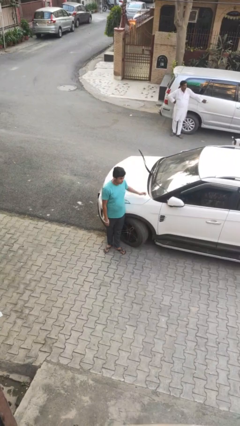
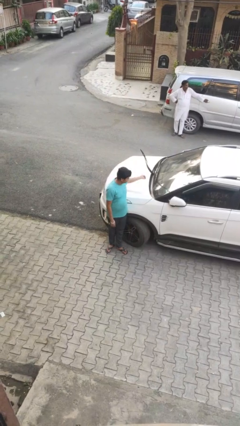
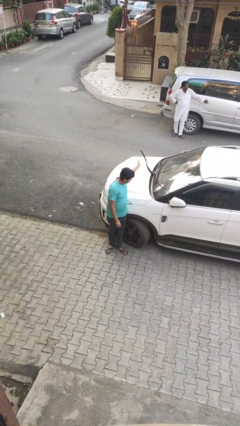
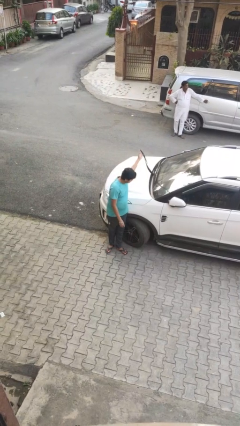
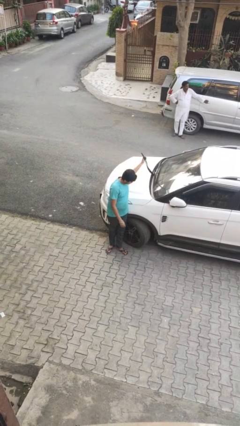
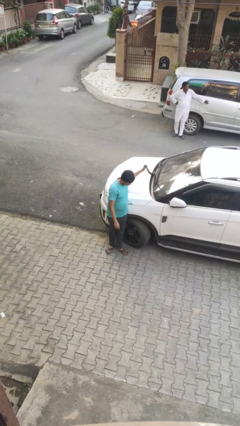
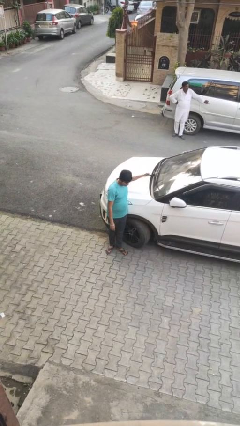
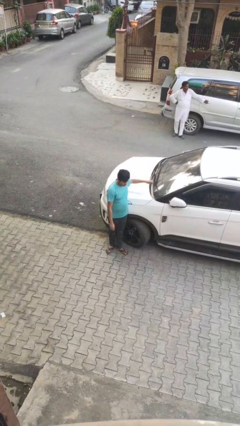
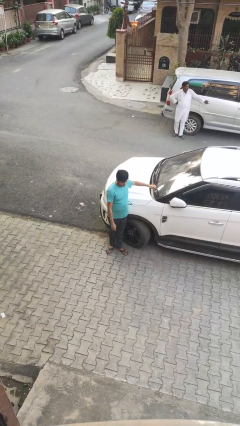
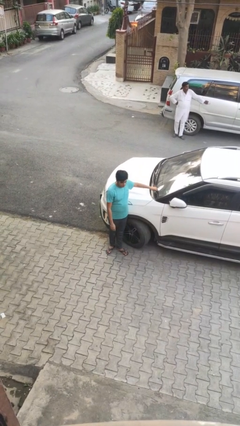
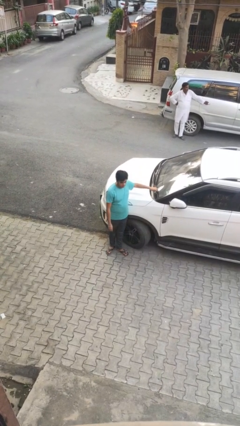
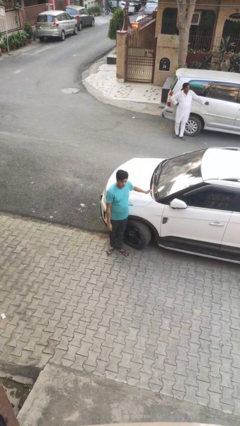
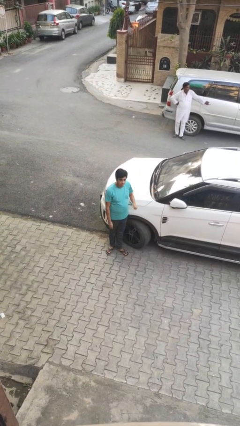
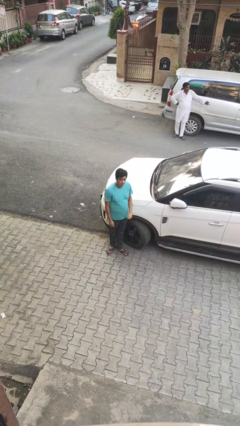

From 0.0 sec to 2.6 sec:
person flips down car wipers

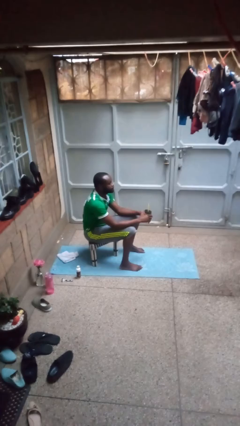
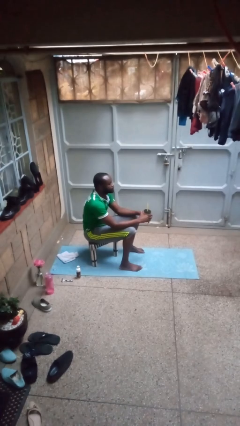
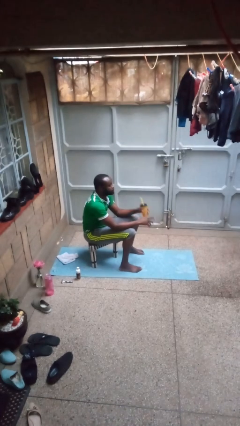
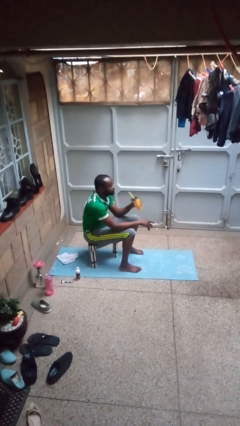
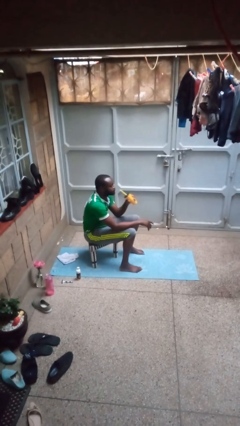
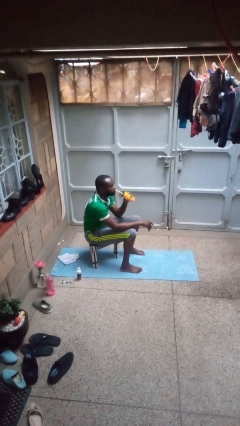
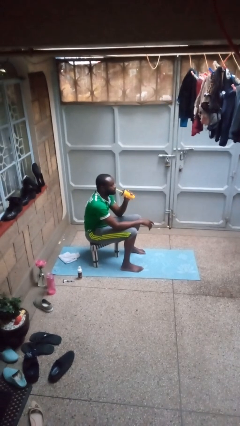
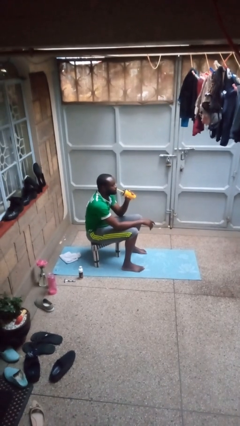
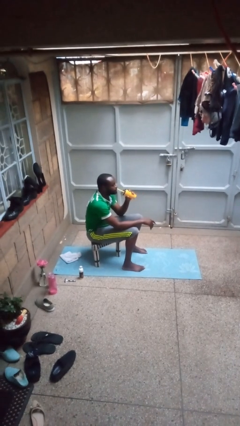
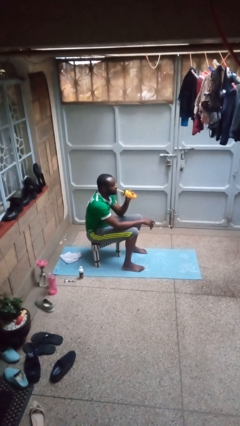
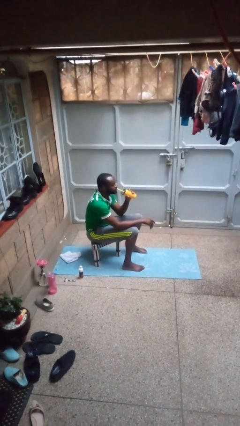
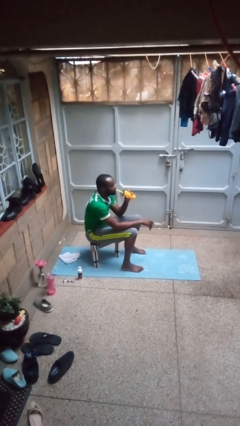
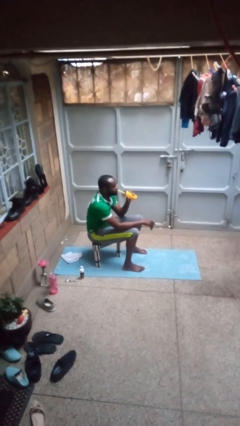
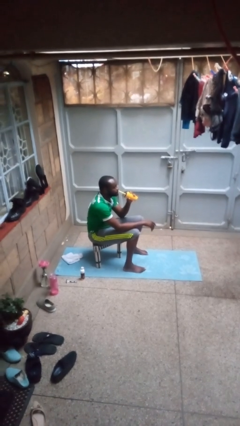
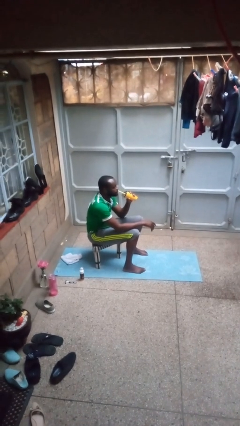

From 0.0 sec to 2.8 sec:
person drinks from straw

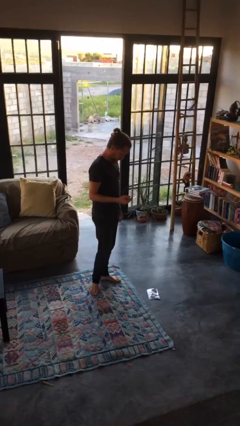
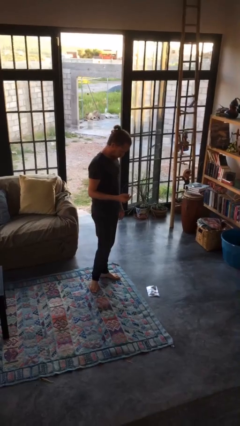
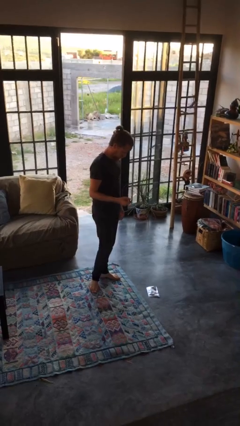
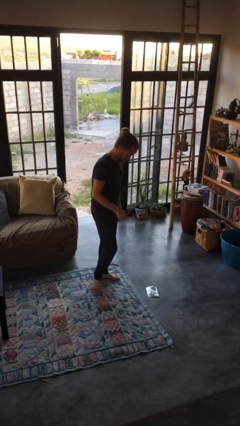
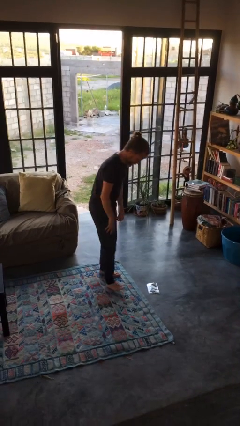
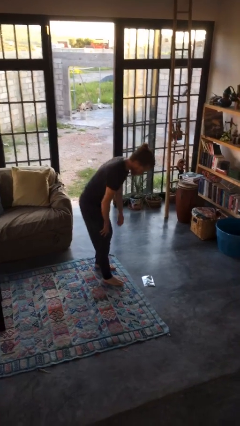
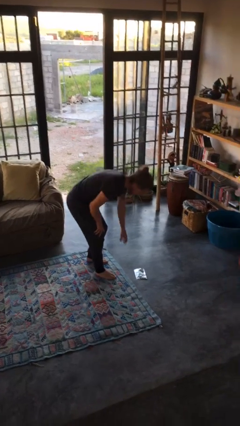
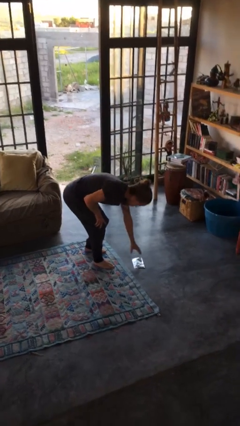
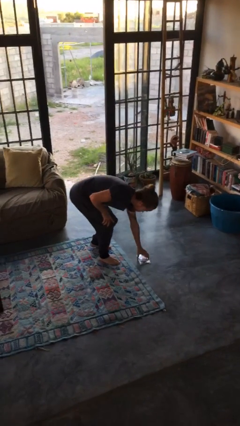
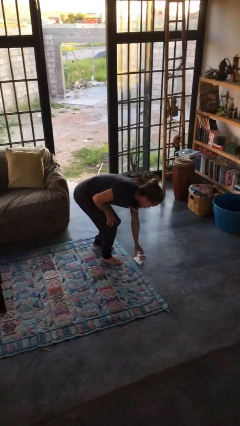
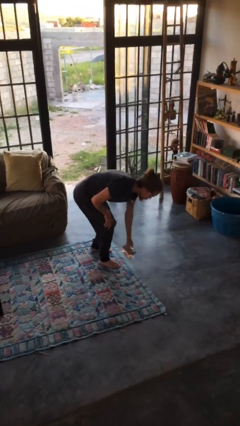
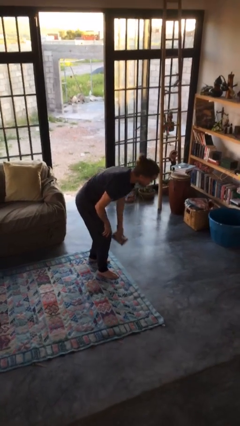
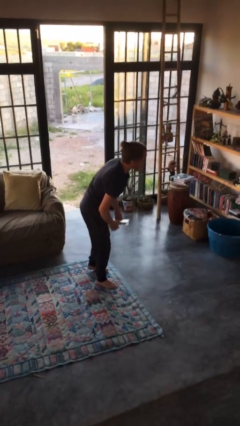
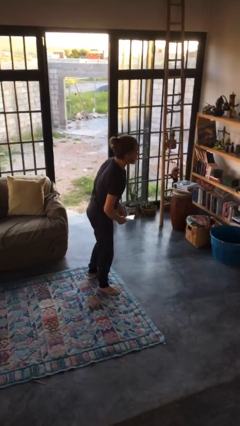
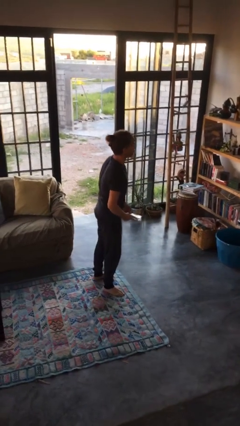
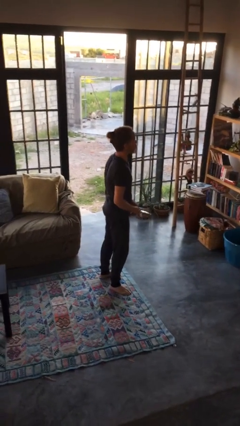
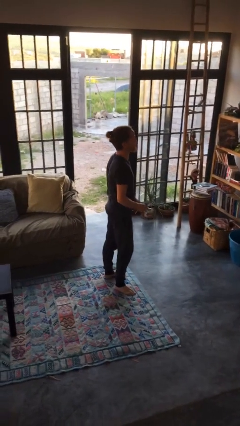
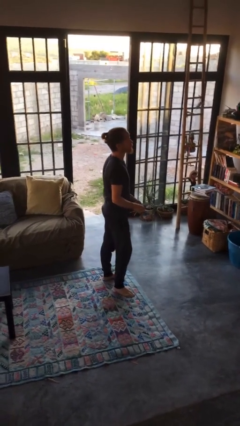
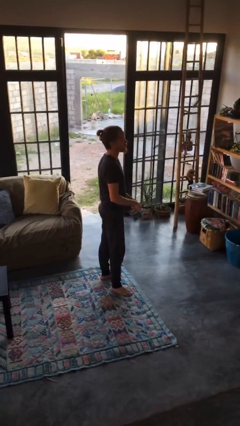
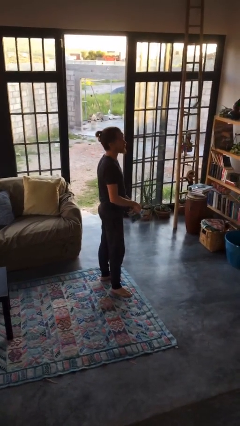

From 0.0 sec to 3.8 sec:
person picks up object from floor

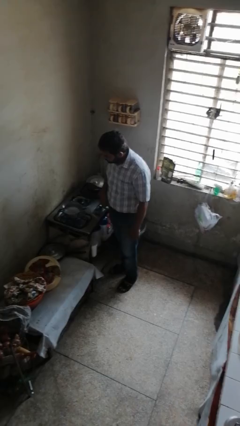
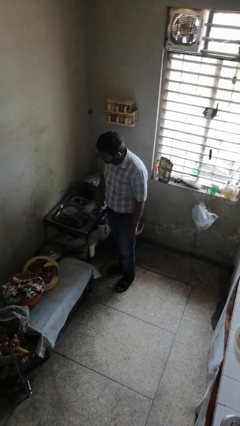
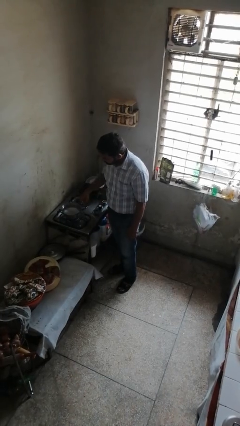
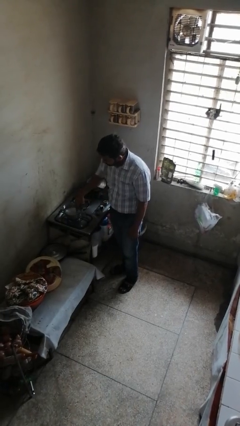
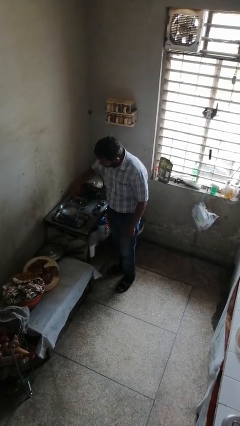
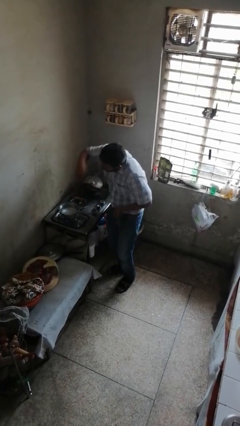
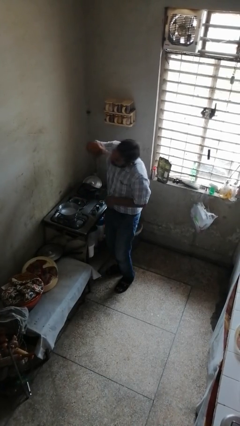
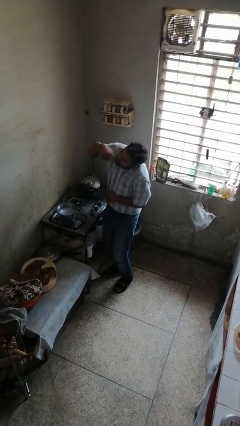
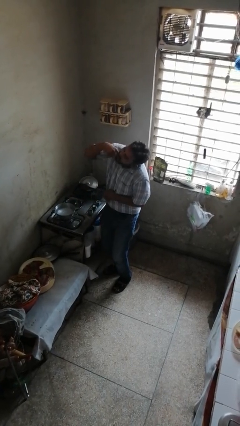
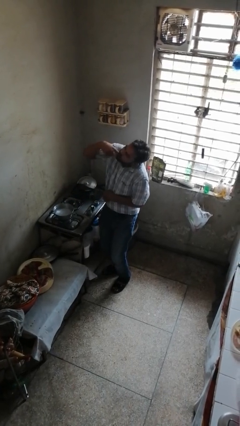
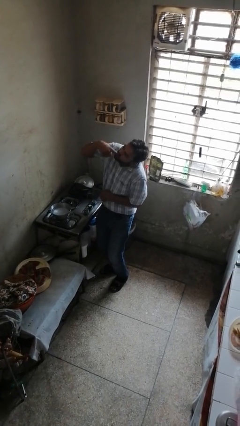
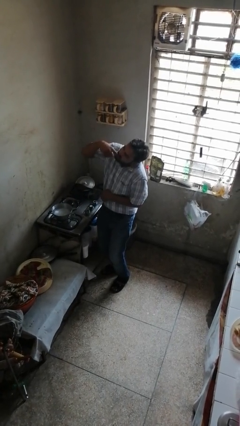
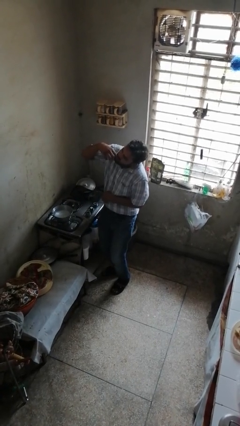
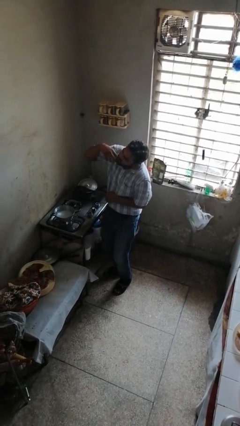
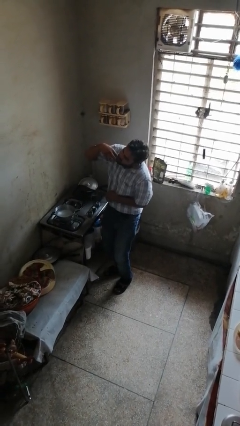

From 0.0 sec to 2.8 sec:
person burns hand

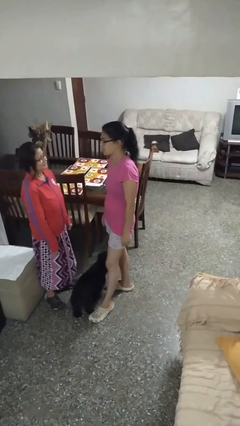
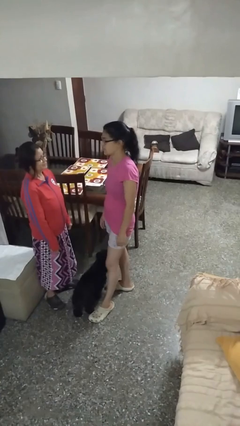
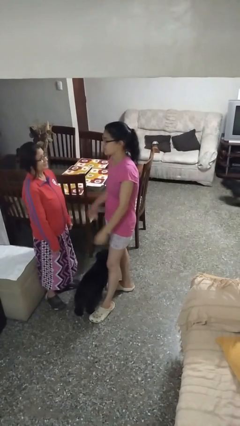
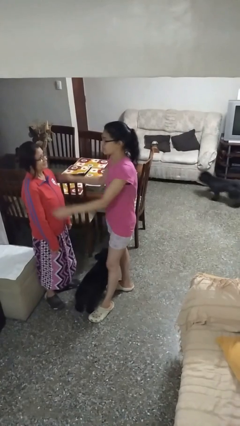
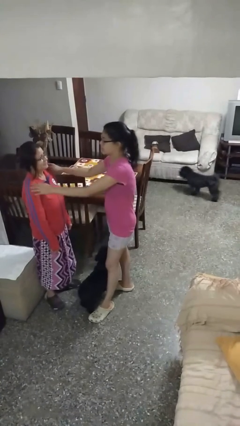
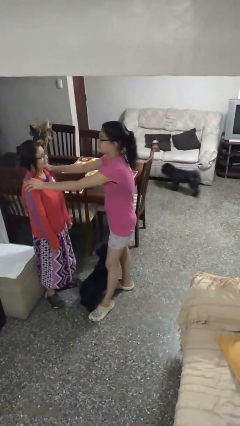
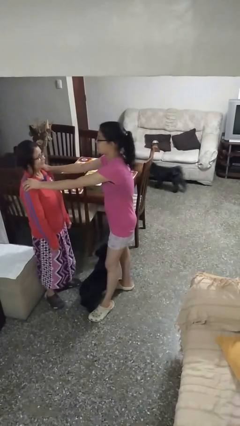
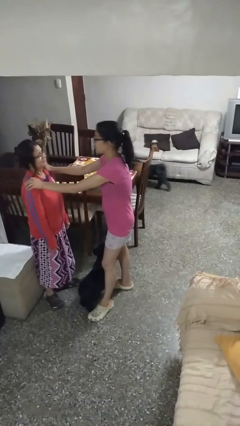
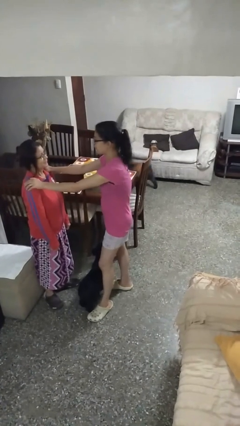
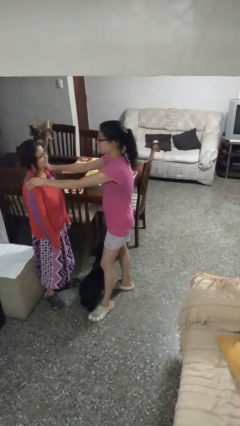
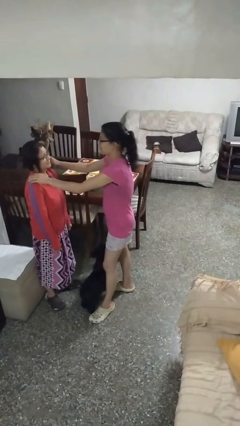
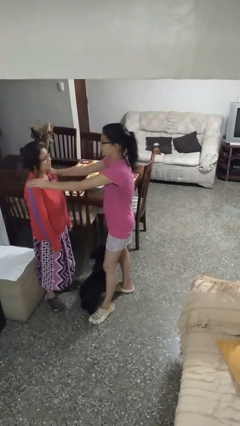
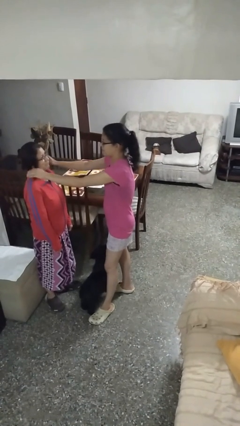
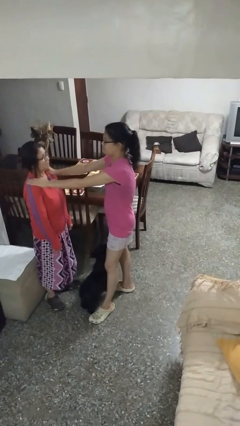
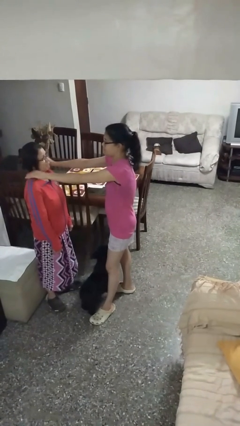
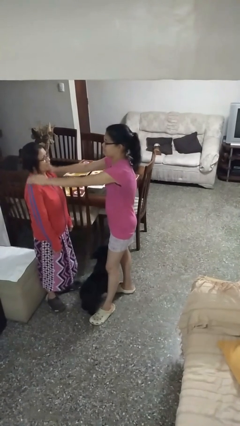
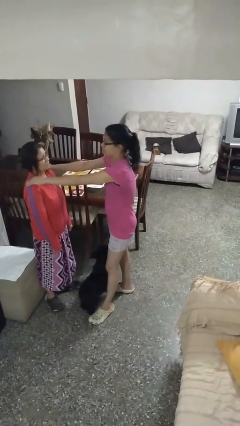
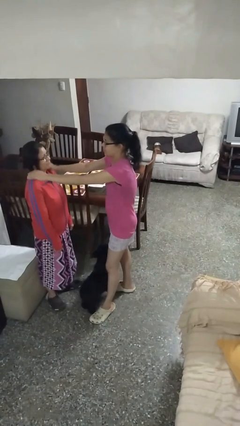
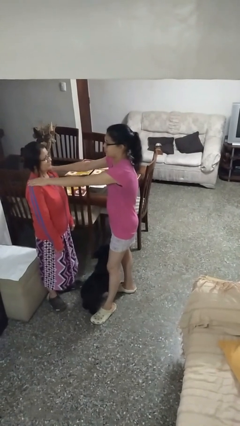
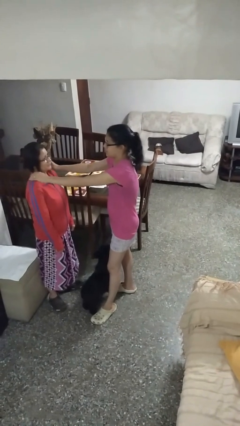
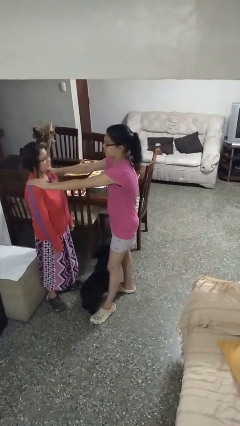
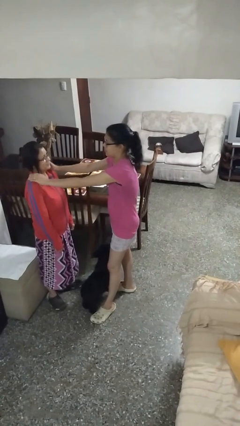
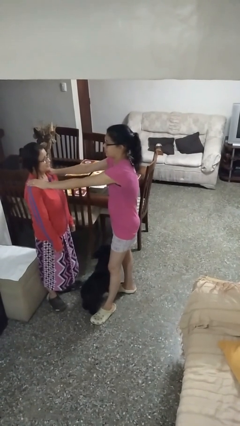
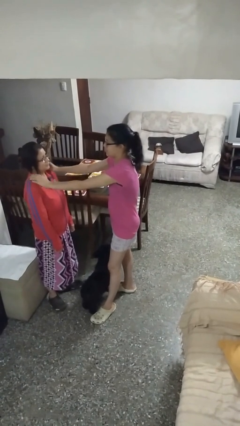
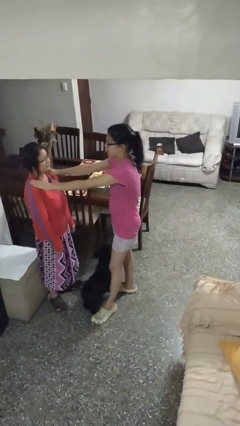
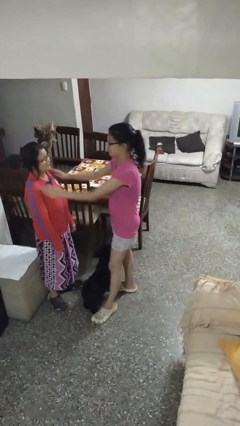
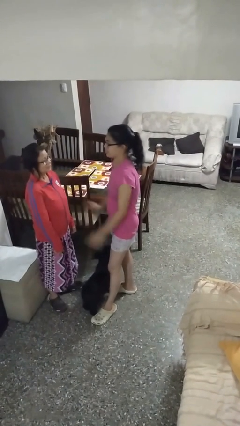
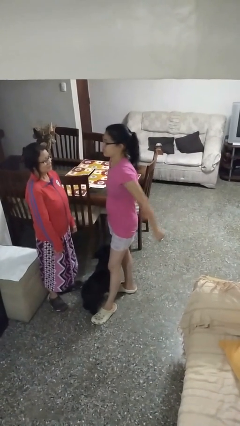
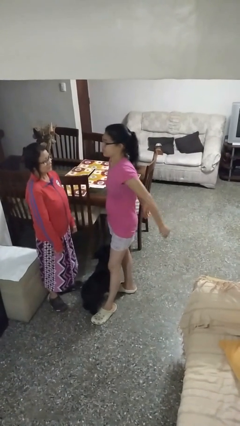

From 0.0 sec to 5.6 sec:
person pounds shoulders of person

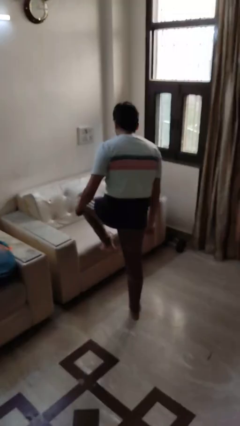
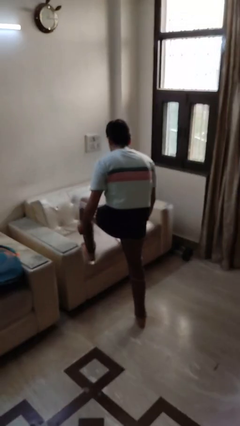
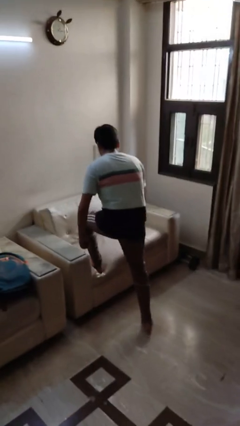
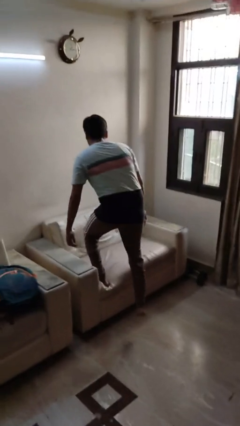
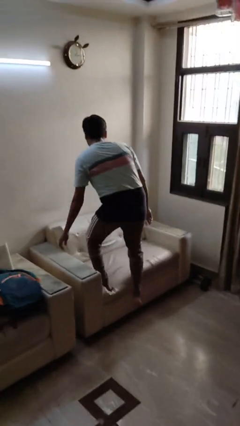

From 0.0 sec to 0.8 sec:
person climbs on couch
